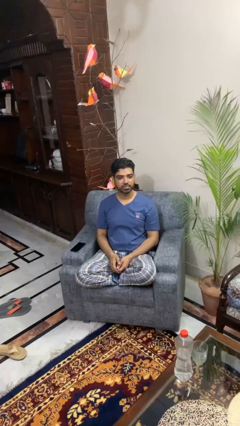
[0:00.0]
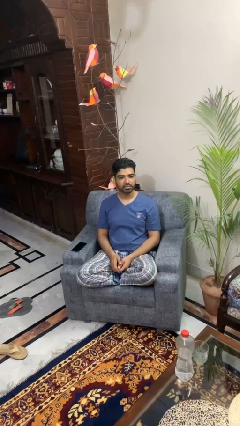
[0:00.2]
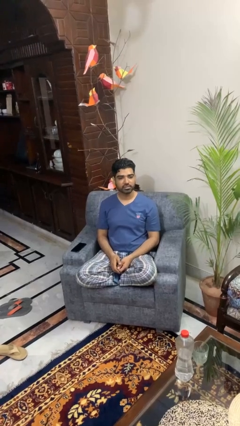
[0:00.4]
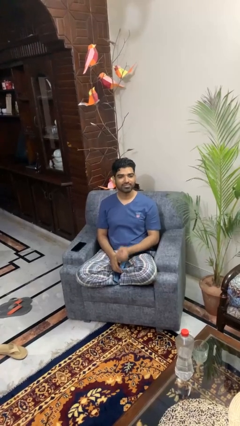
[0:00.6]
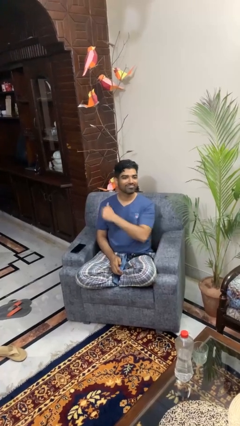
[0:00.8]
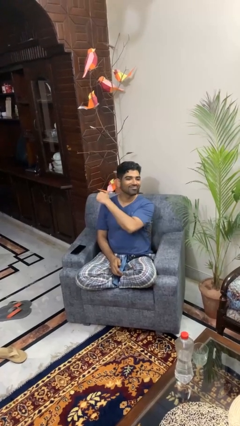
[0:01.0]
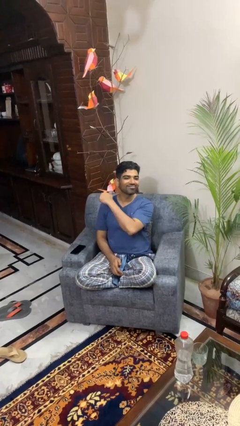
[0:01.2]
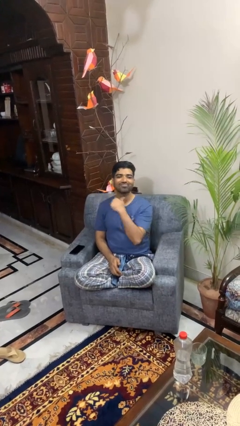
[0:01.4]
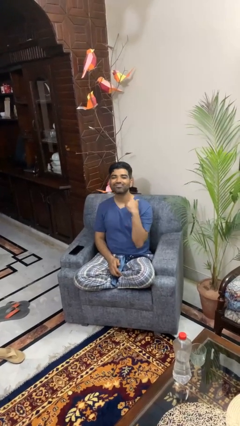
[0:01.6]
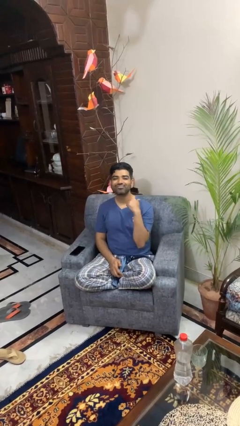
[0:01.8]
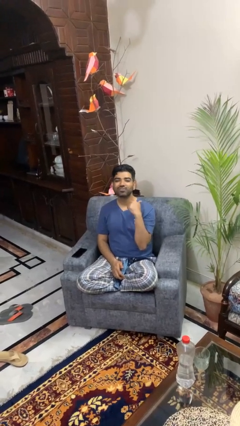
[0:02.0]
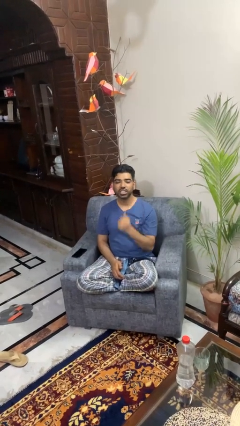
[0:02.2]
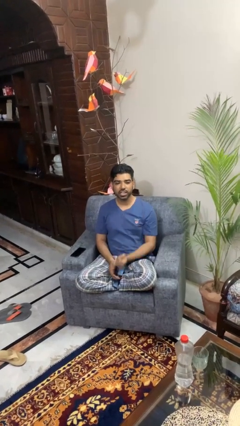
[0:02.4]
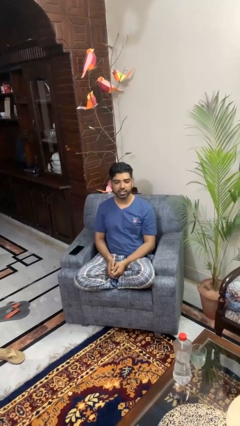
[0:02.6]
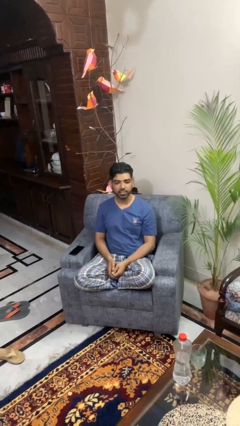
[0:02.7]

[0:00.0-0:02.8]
person gestures cut

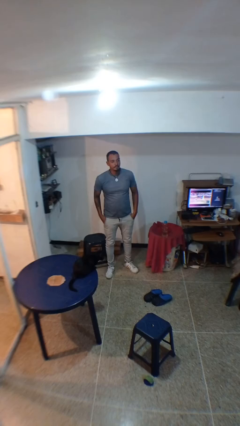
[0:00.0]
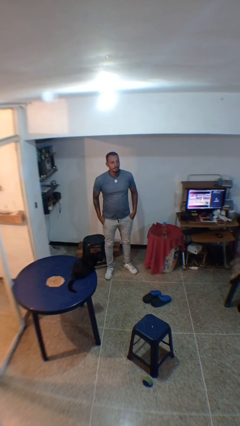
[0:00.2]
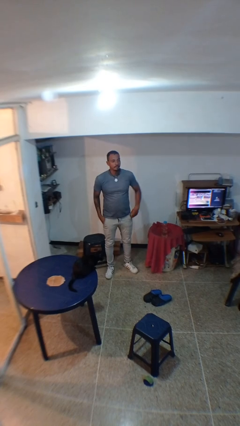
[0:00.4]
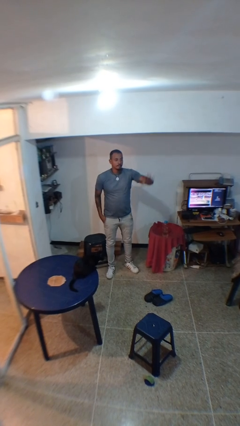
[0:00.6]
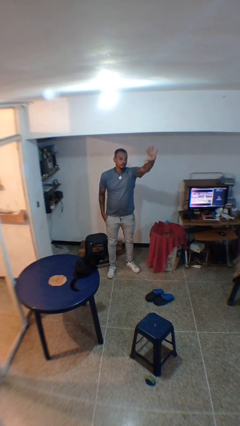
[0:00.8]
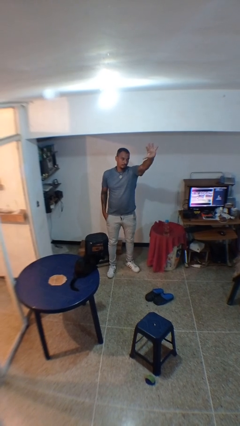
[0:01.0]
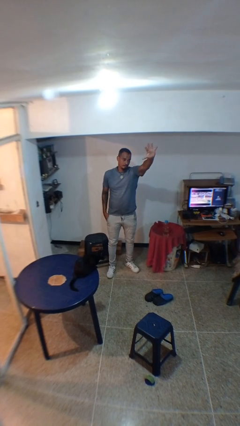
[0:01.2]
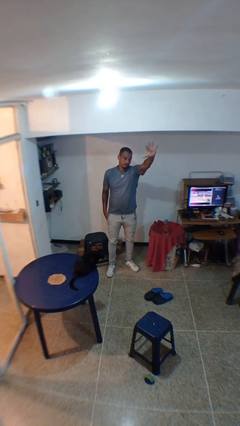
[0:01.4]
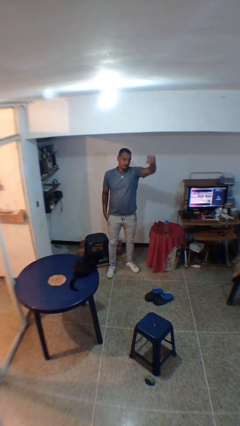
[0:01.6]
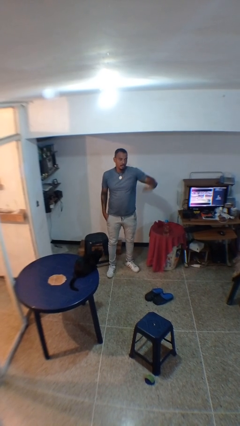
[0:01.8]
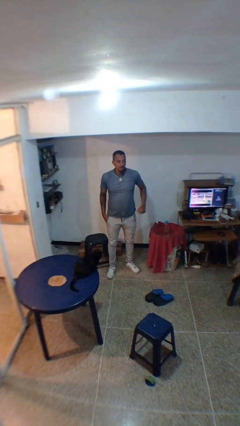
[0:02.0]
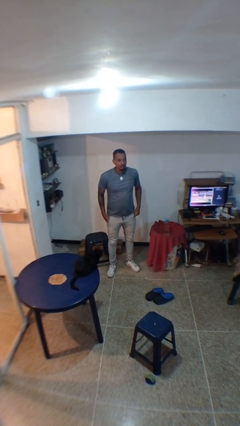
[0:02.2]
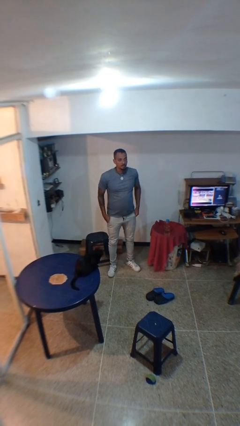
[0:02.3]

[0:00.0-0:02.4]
person gestures number five

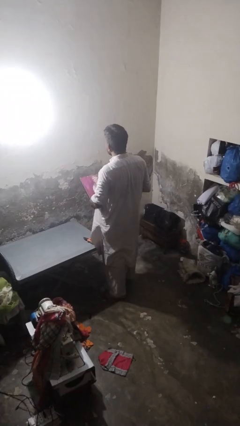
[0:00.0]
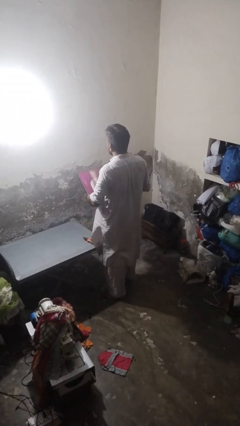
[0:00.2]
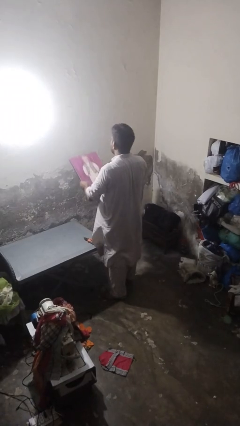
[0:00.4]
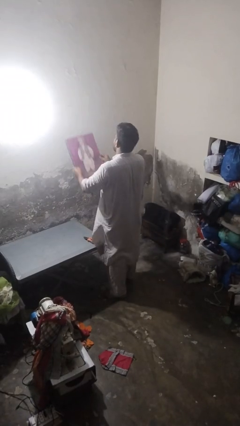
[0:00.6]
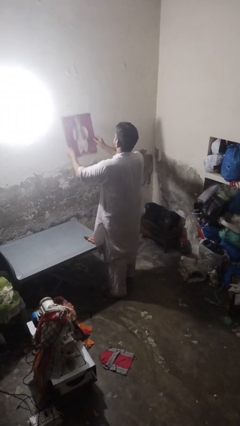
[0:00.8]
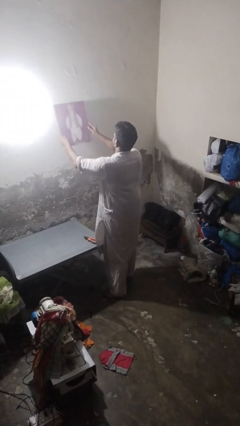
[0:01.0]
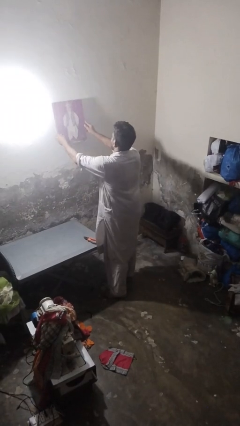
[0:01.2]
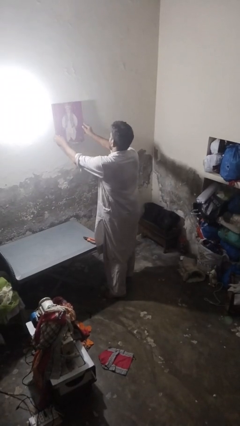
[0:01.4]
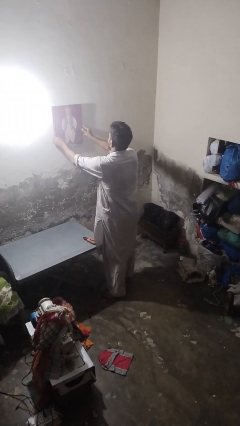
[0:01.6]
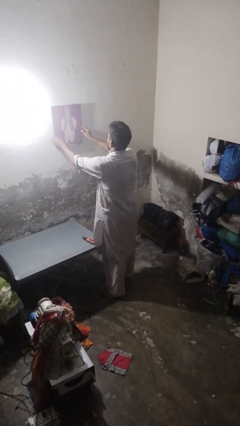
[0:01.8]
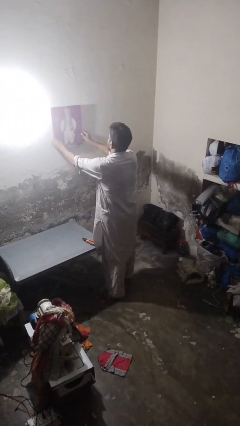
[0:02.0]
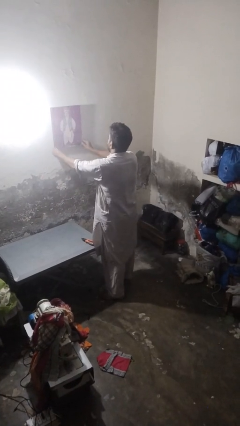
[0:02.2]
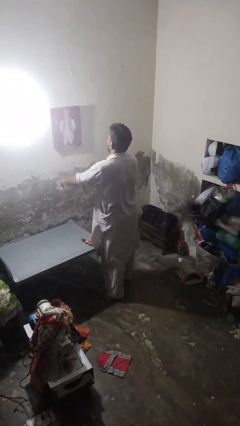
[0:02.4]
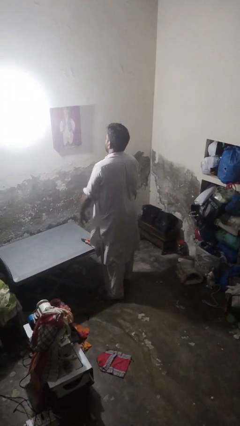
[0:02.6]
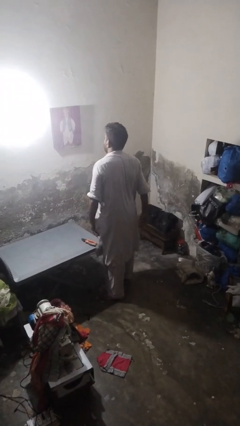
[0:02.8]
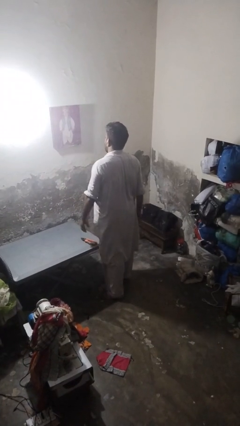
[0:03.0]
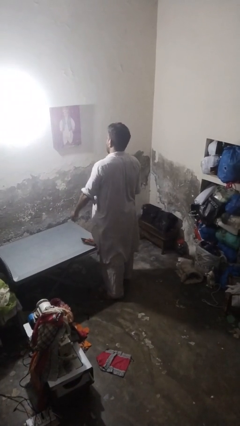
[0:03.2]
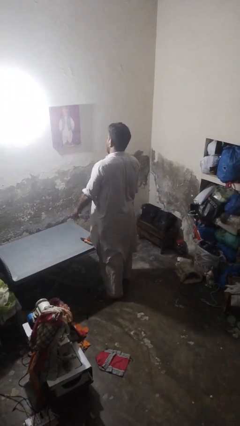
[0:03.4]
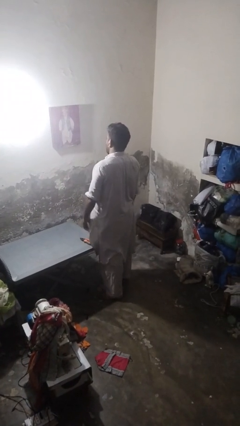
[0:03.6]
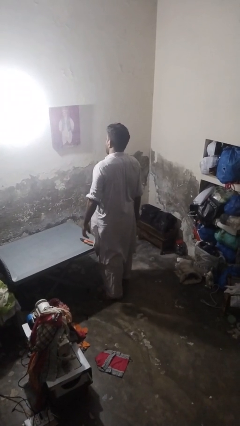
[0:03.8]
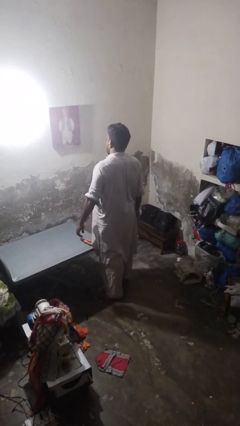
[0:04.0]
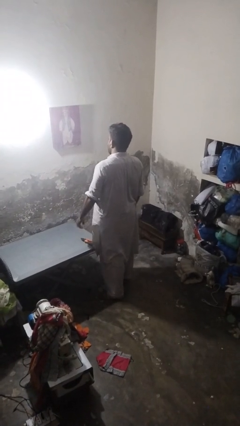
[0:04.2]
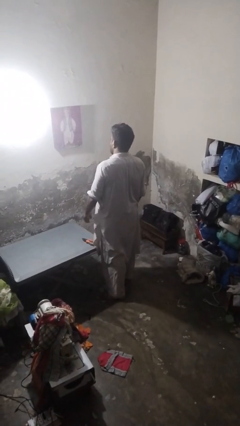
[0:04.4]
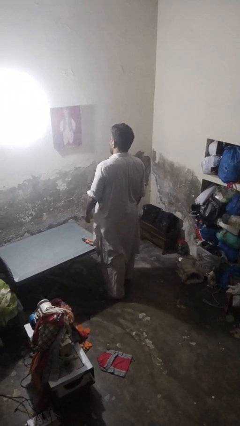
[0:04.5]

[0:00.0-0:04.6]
person puts up picture frame

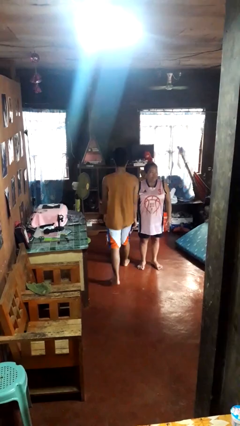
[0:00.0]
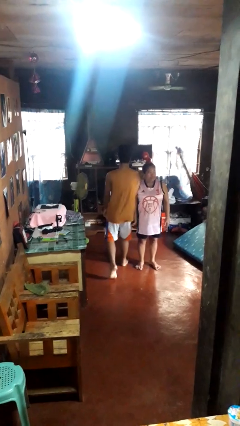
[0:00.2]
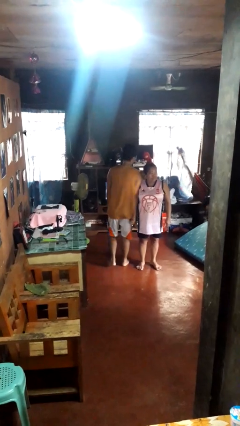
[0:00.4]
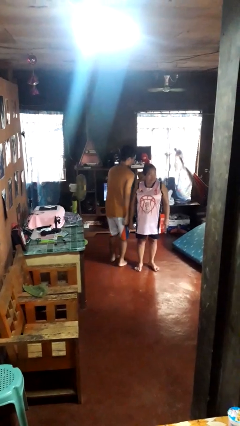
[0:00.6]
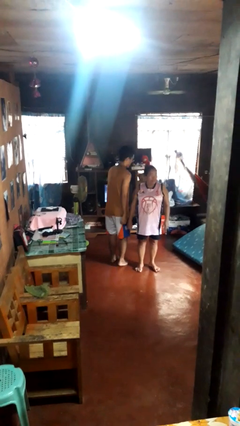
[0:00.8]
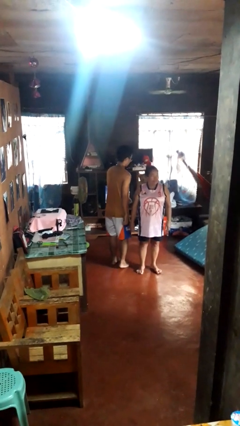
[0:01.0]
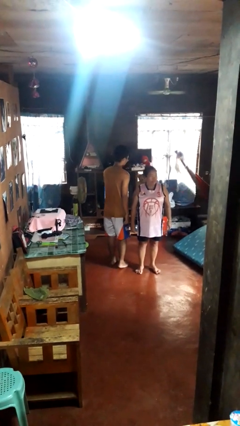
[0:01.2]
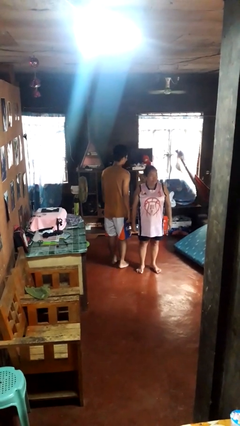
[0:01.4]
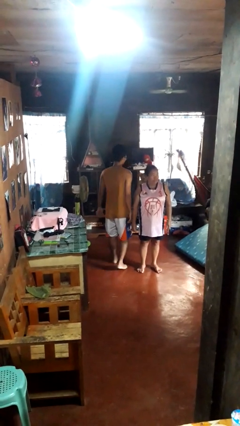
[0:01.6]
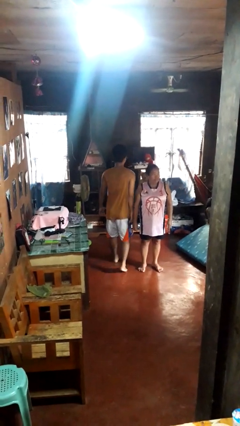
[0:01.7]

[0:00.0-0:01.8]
person bumps into person

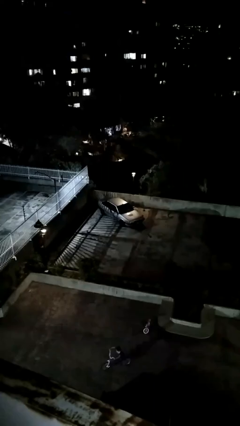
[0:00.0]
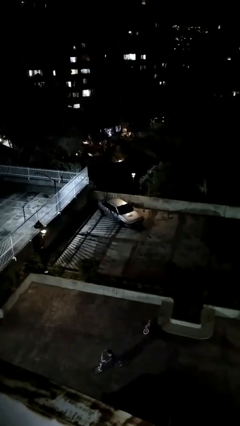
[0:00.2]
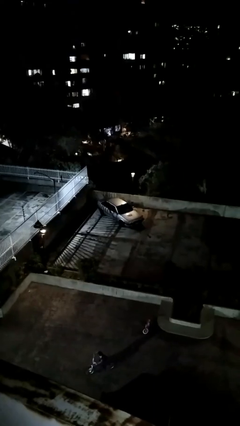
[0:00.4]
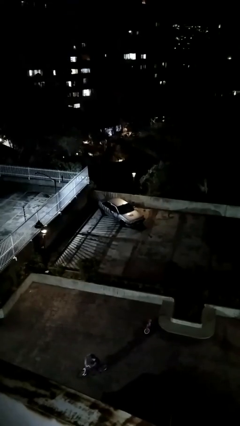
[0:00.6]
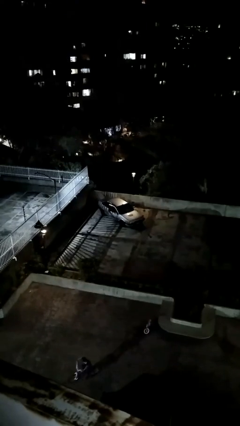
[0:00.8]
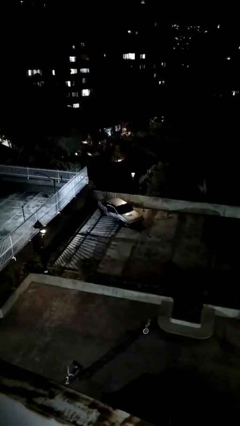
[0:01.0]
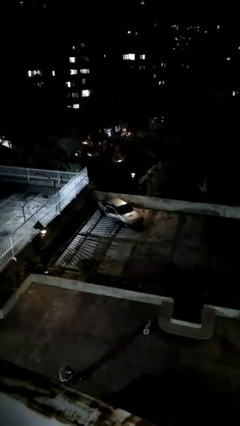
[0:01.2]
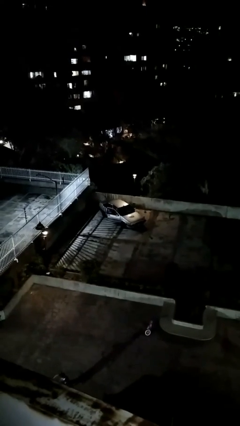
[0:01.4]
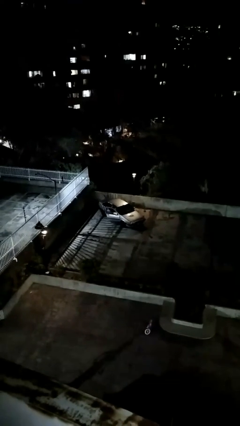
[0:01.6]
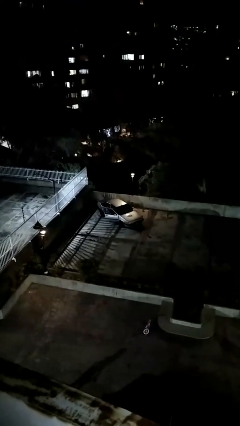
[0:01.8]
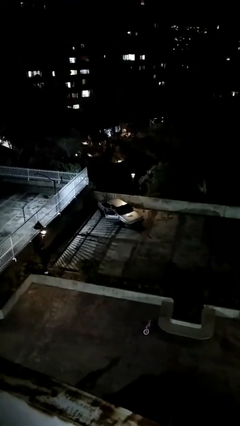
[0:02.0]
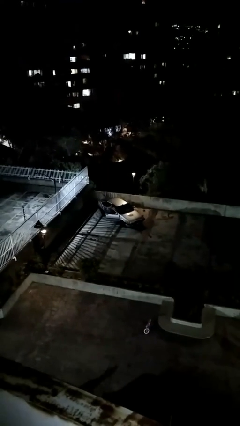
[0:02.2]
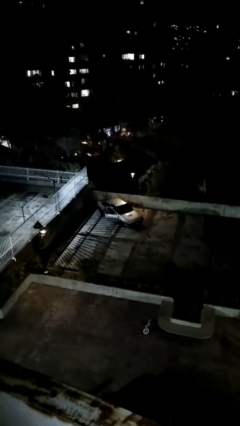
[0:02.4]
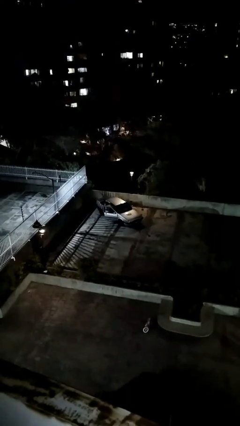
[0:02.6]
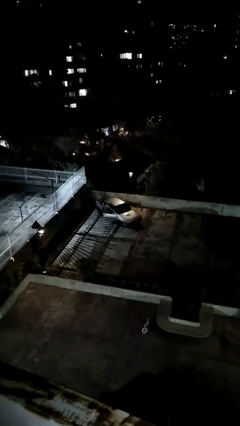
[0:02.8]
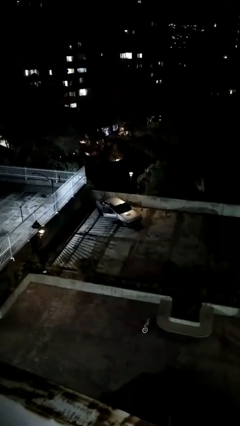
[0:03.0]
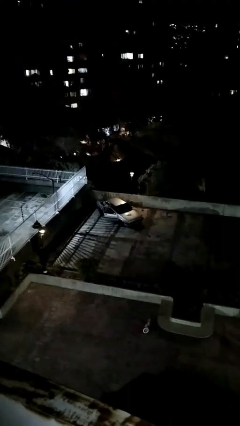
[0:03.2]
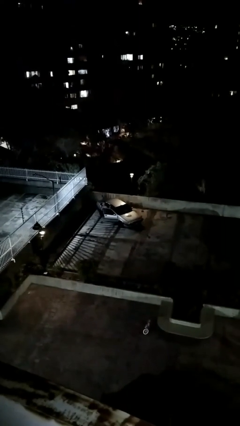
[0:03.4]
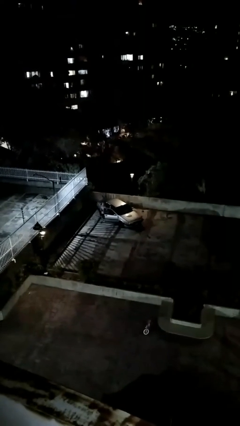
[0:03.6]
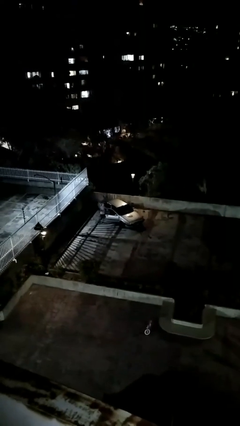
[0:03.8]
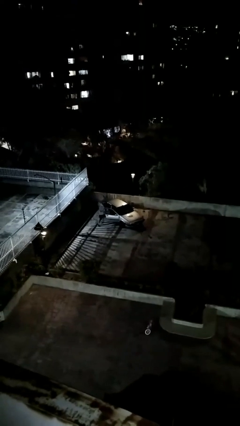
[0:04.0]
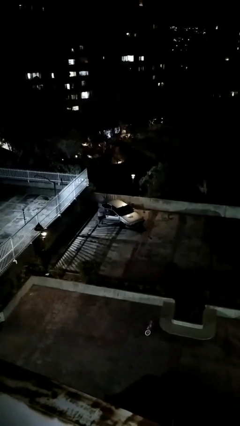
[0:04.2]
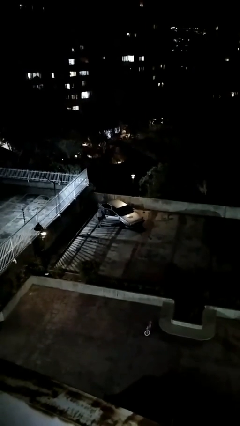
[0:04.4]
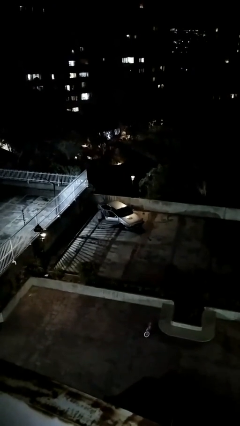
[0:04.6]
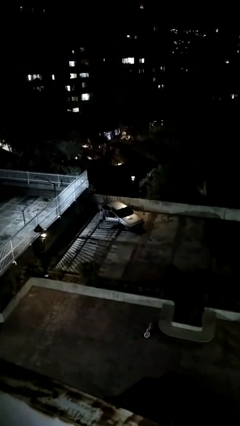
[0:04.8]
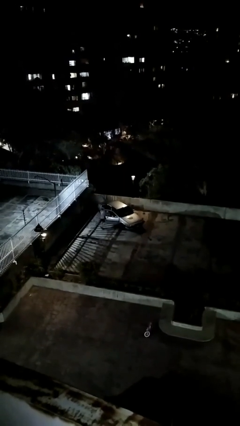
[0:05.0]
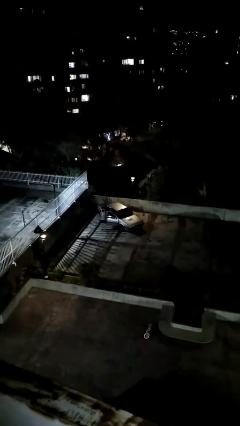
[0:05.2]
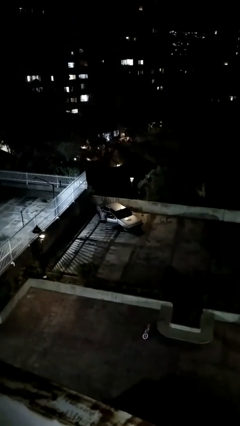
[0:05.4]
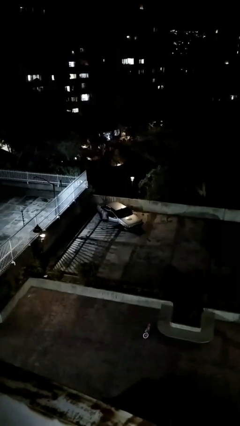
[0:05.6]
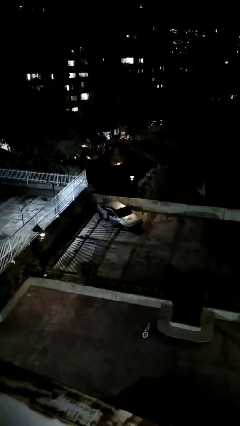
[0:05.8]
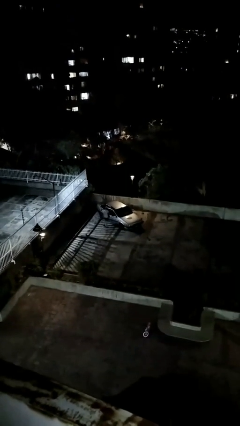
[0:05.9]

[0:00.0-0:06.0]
car drops off person

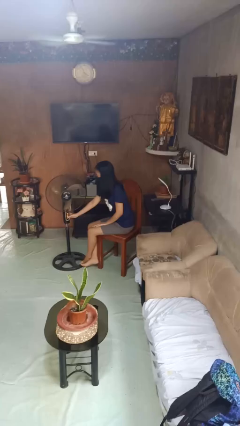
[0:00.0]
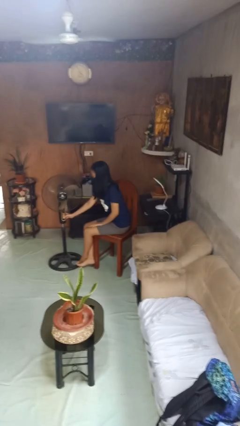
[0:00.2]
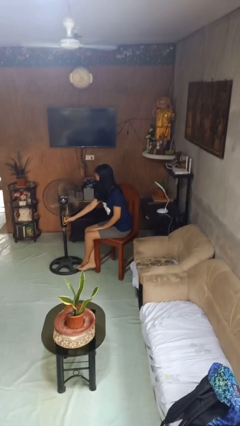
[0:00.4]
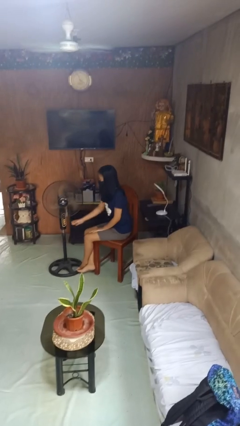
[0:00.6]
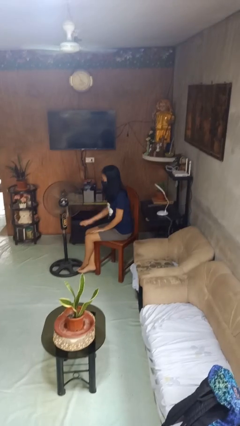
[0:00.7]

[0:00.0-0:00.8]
person turns on fan
